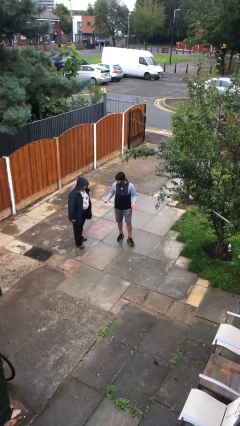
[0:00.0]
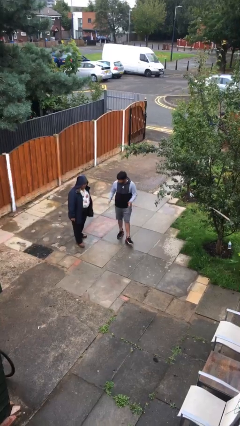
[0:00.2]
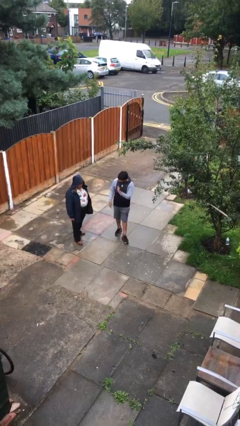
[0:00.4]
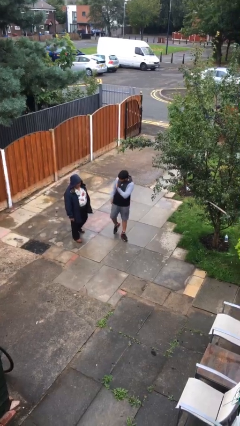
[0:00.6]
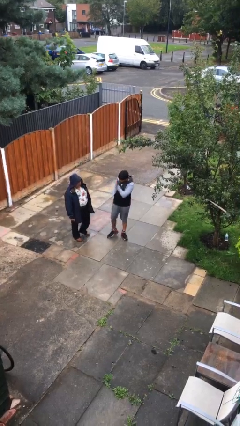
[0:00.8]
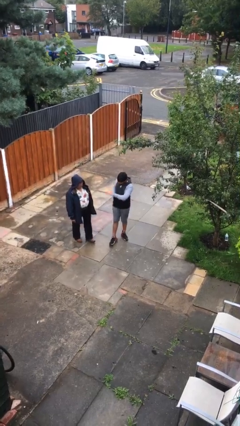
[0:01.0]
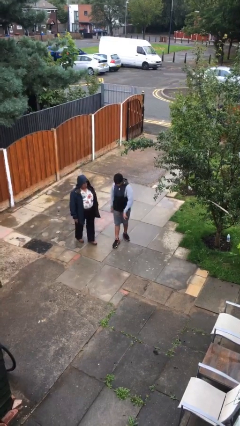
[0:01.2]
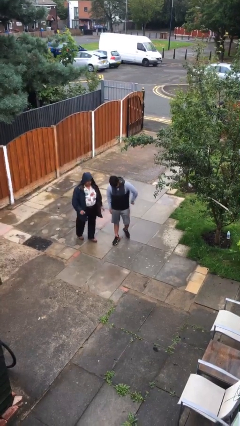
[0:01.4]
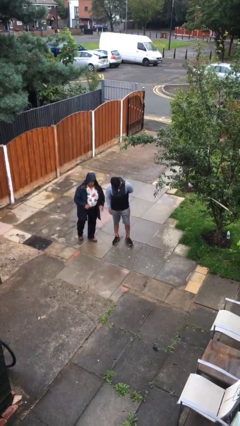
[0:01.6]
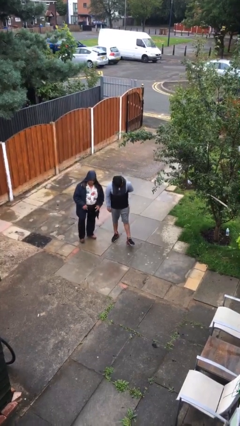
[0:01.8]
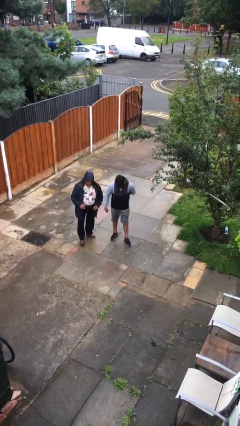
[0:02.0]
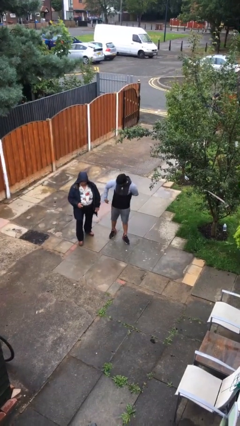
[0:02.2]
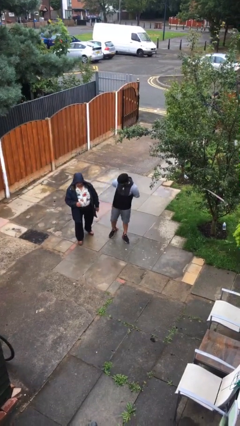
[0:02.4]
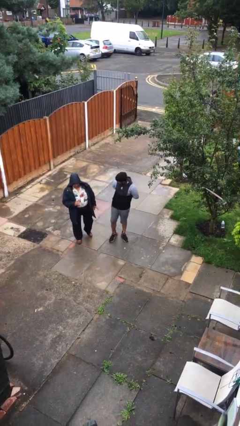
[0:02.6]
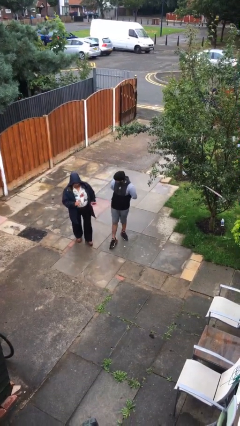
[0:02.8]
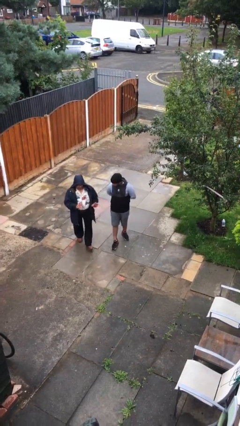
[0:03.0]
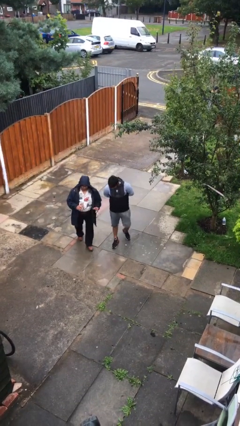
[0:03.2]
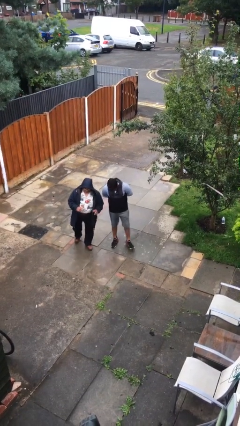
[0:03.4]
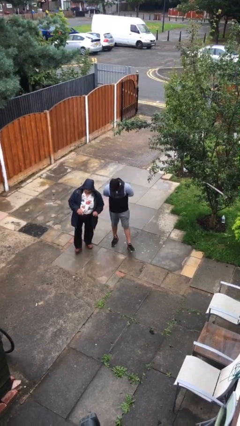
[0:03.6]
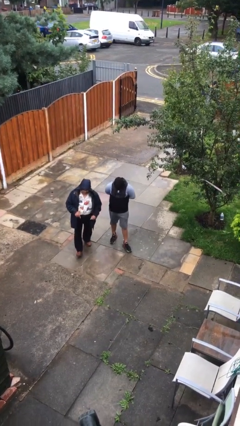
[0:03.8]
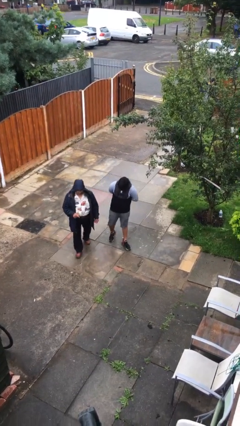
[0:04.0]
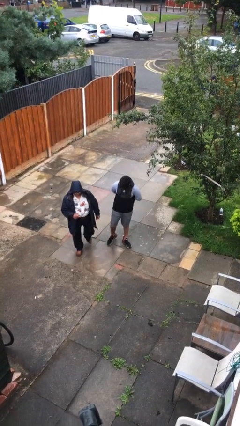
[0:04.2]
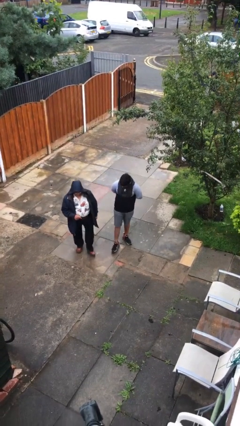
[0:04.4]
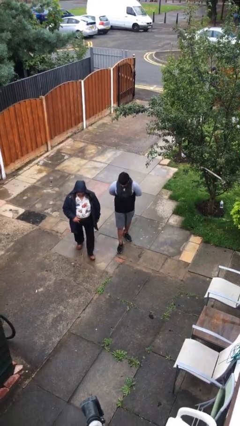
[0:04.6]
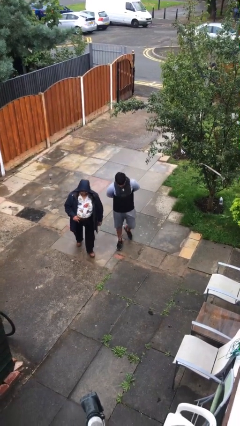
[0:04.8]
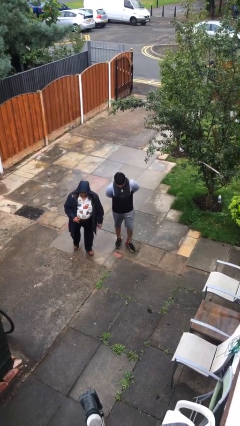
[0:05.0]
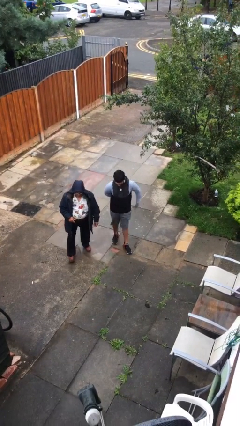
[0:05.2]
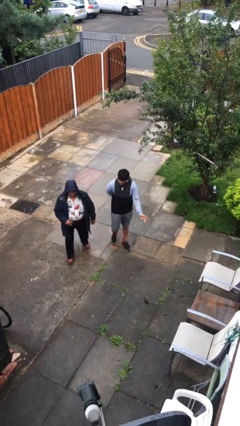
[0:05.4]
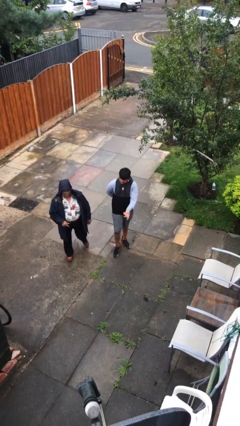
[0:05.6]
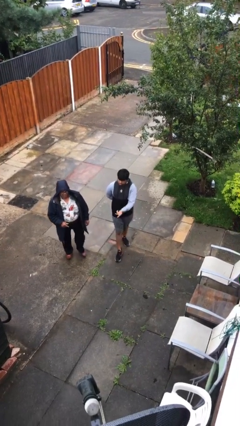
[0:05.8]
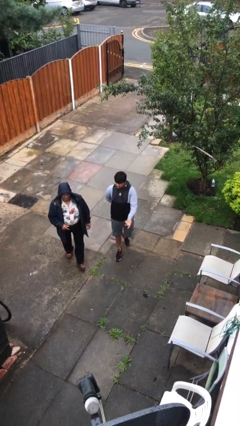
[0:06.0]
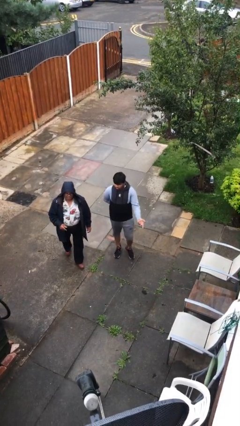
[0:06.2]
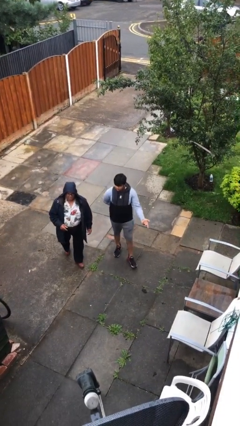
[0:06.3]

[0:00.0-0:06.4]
person talks to person

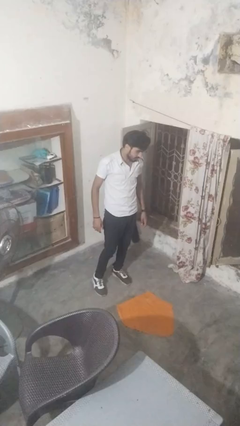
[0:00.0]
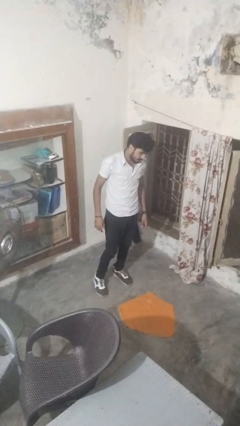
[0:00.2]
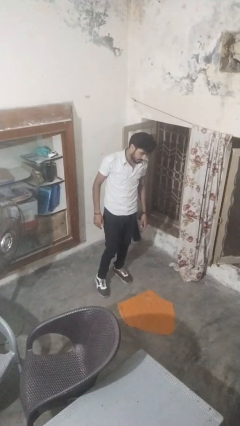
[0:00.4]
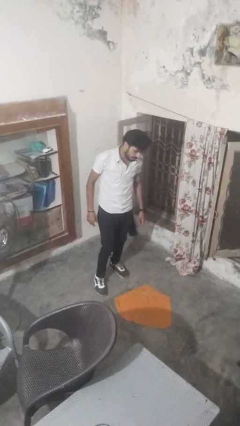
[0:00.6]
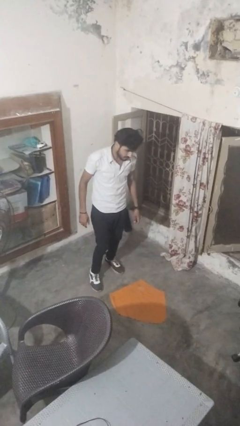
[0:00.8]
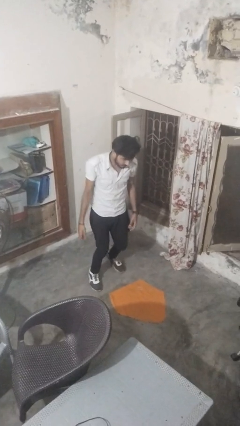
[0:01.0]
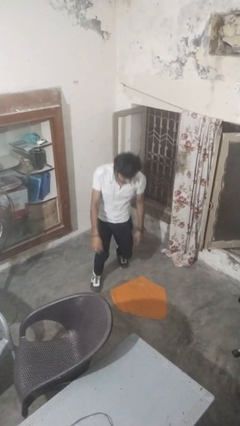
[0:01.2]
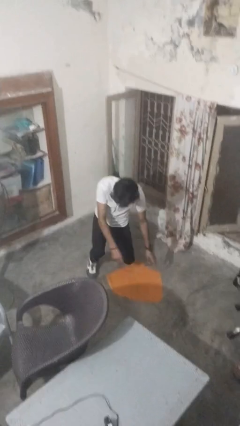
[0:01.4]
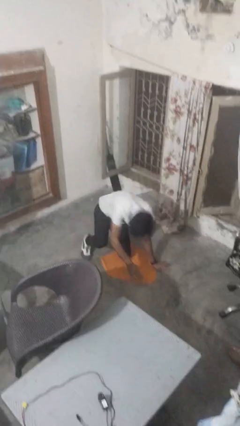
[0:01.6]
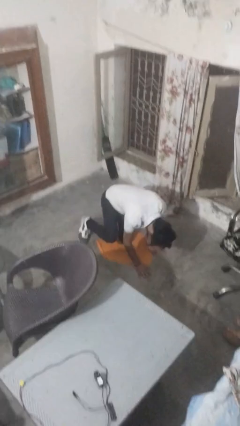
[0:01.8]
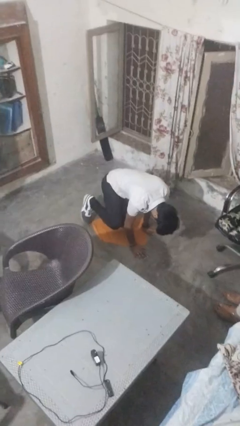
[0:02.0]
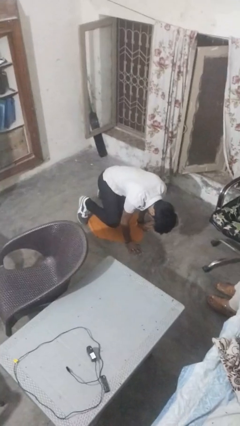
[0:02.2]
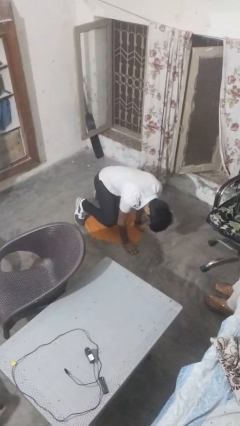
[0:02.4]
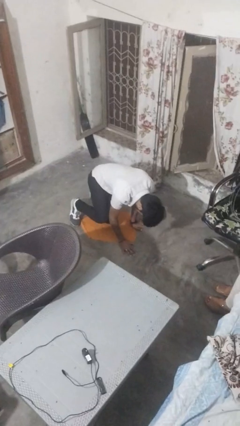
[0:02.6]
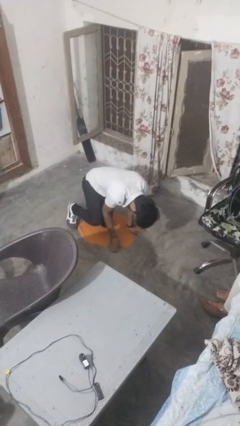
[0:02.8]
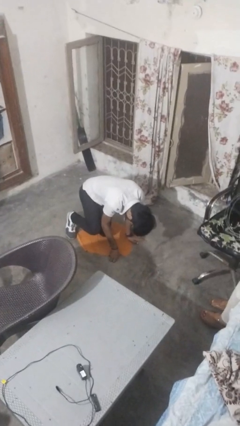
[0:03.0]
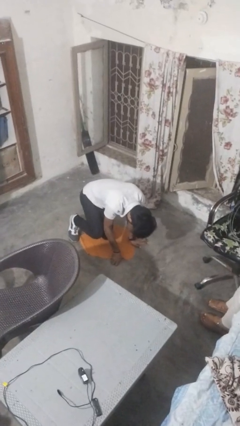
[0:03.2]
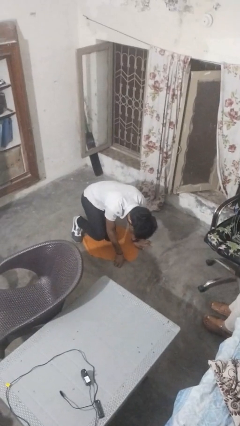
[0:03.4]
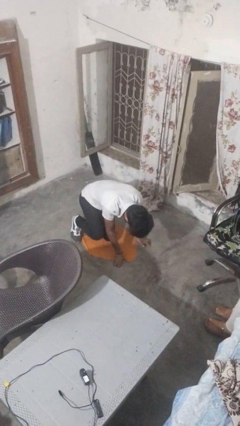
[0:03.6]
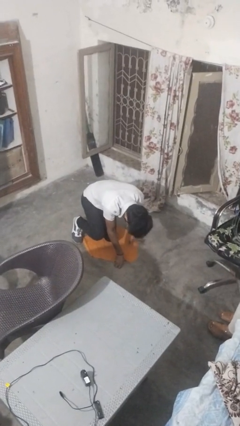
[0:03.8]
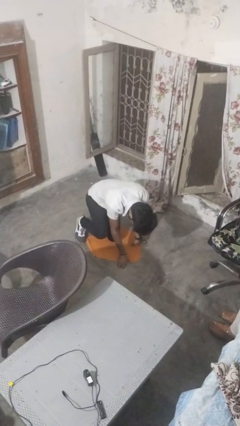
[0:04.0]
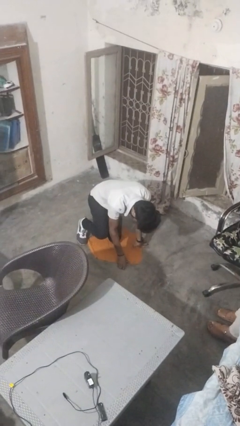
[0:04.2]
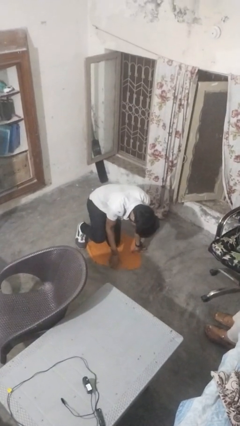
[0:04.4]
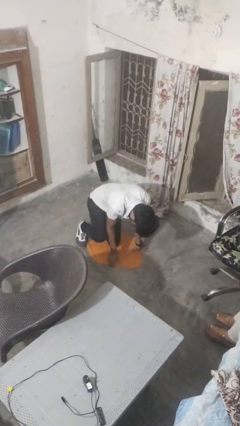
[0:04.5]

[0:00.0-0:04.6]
person falls while standing

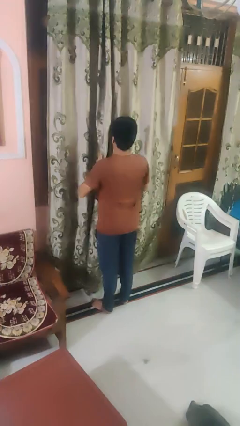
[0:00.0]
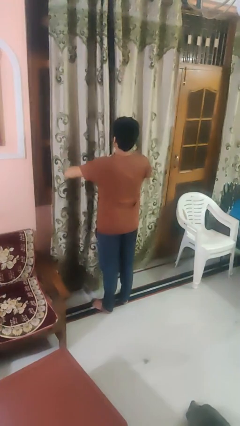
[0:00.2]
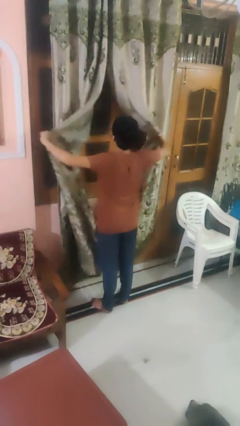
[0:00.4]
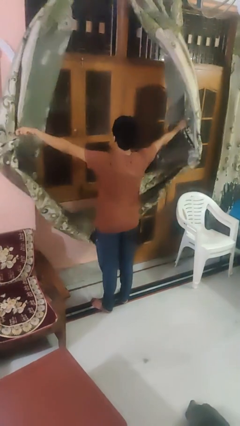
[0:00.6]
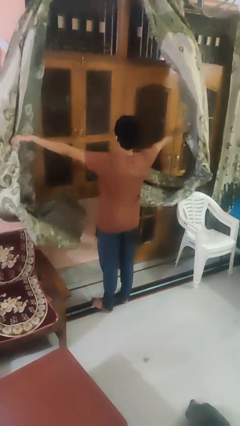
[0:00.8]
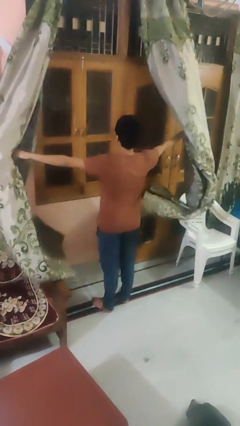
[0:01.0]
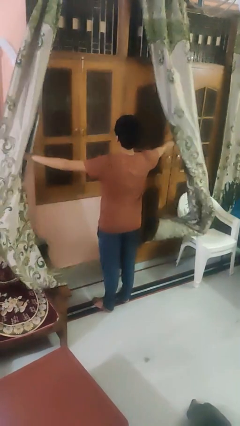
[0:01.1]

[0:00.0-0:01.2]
person opens curtains

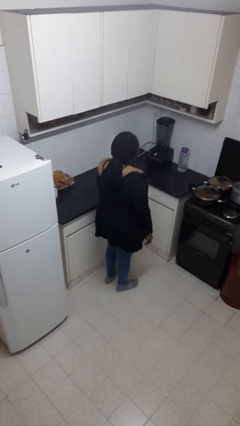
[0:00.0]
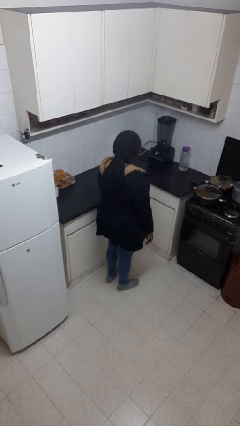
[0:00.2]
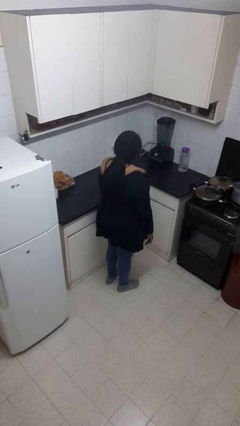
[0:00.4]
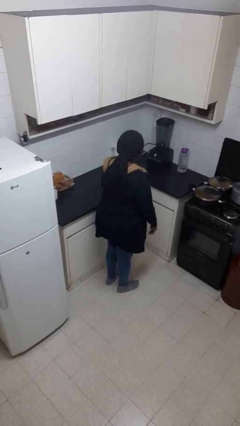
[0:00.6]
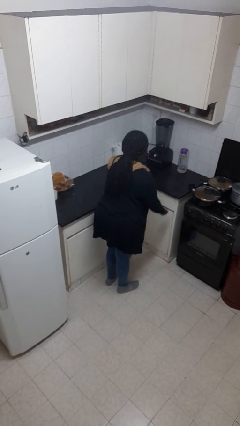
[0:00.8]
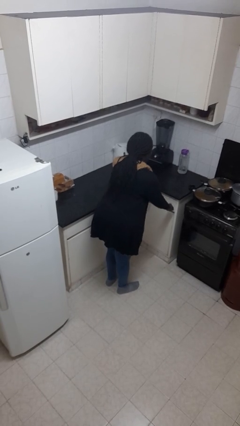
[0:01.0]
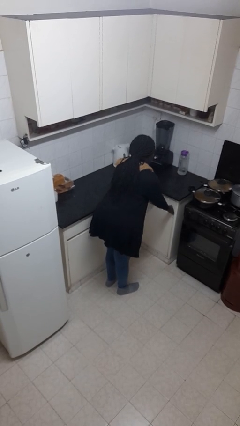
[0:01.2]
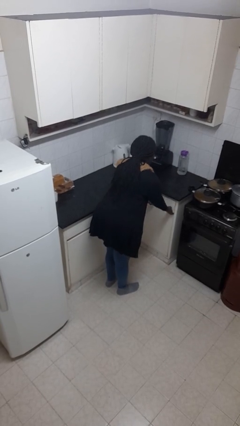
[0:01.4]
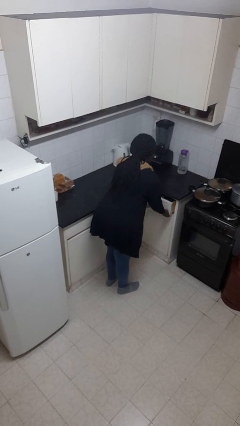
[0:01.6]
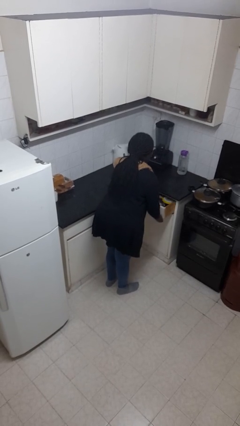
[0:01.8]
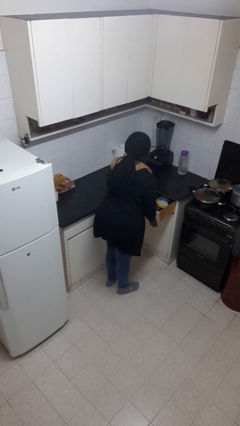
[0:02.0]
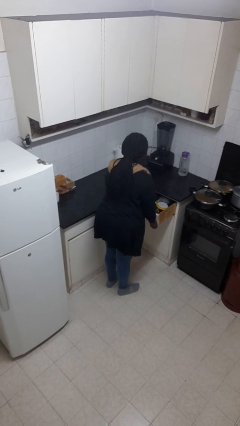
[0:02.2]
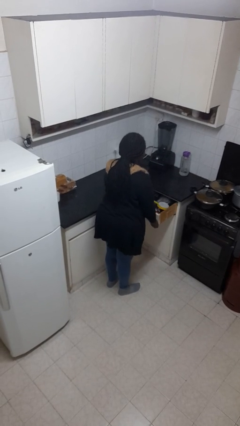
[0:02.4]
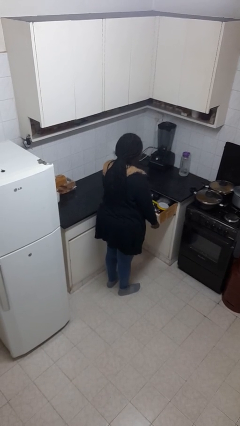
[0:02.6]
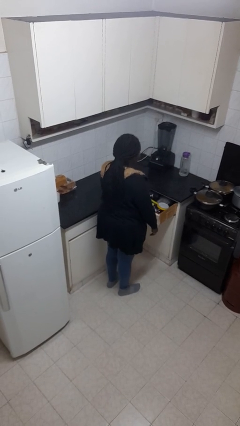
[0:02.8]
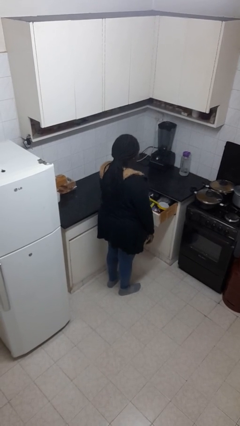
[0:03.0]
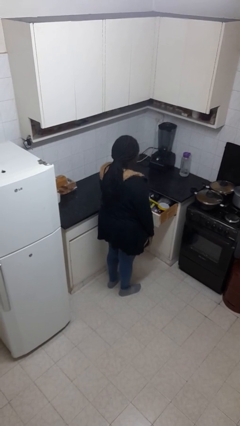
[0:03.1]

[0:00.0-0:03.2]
person opens kitchen drawer

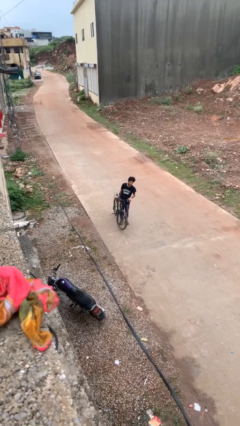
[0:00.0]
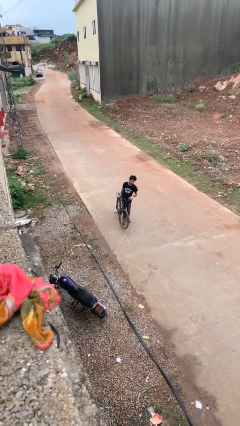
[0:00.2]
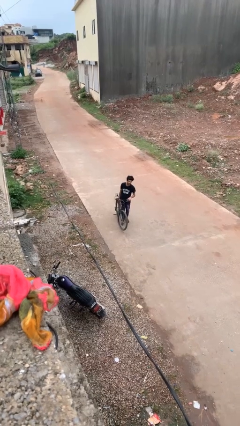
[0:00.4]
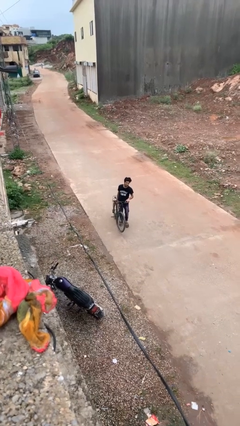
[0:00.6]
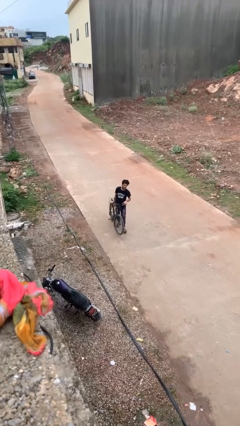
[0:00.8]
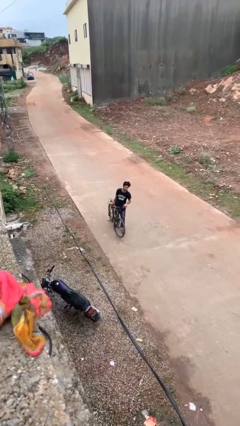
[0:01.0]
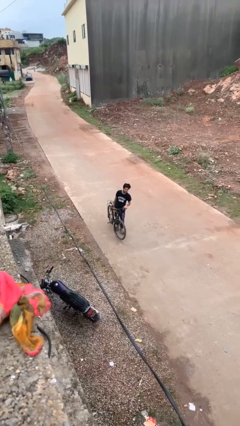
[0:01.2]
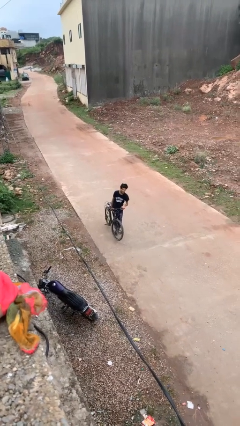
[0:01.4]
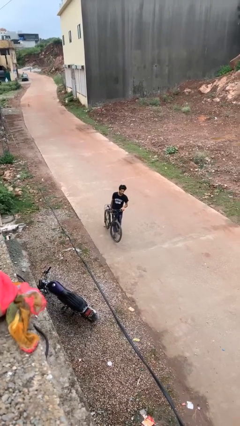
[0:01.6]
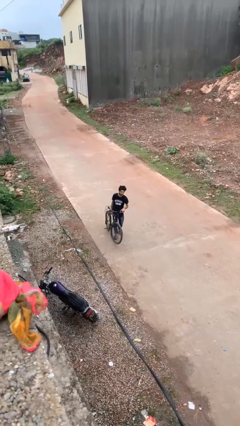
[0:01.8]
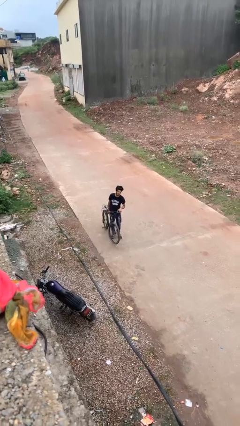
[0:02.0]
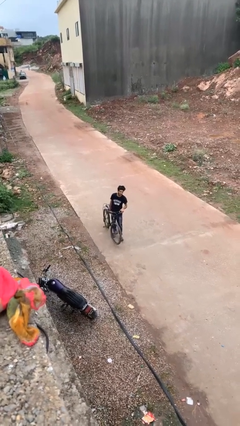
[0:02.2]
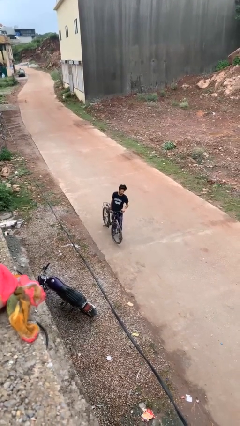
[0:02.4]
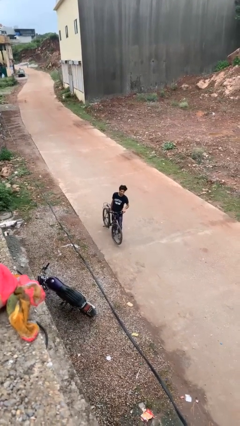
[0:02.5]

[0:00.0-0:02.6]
person carries bicycle
